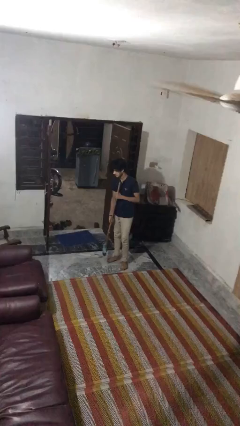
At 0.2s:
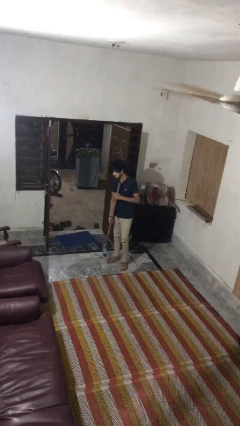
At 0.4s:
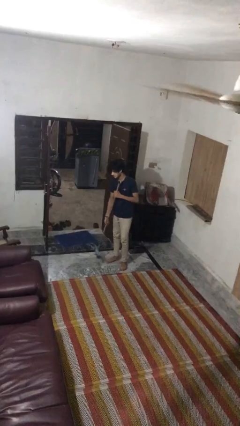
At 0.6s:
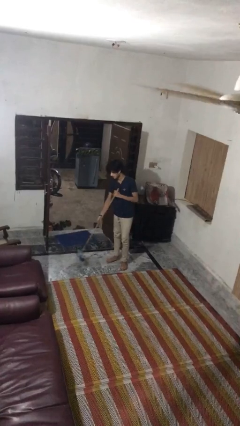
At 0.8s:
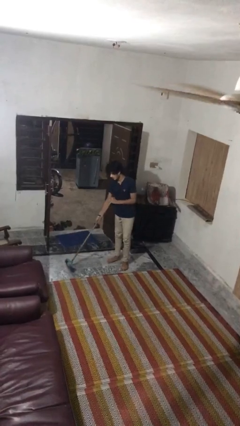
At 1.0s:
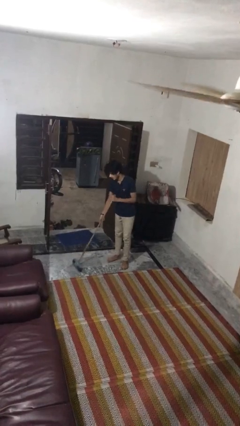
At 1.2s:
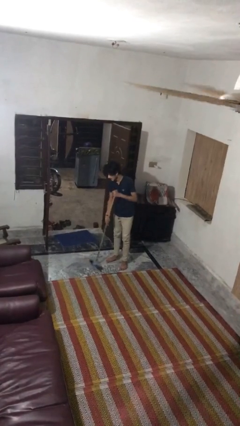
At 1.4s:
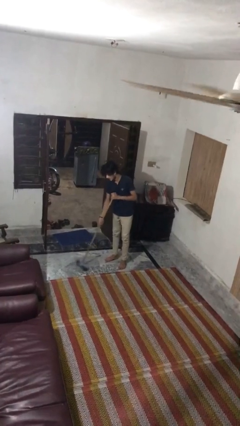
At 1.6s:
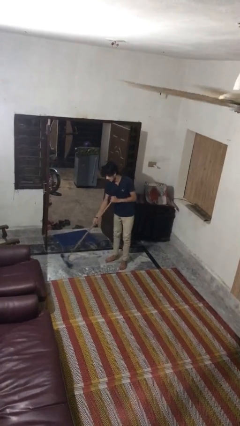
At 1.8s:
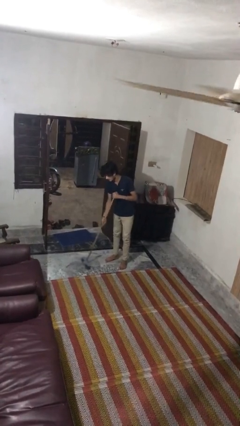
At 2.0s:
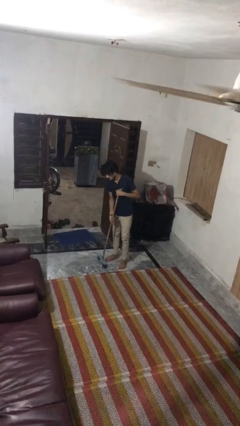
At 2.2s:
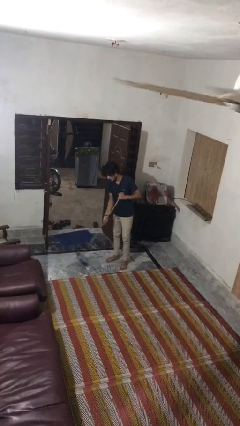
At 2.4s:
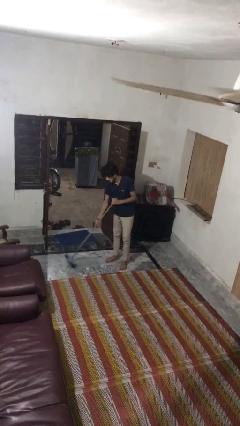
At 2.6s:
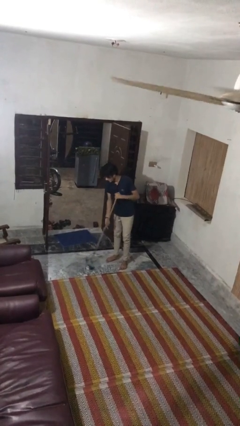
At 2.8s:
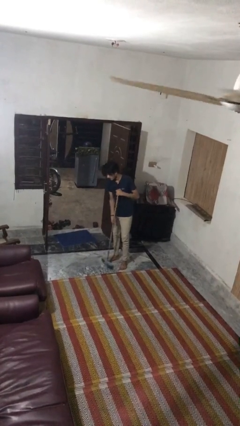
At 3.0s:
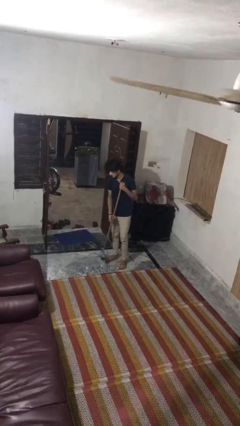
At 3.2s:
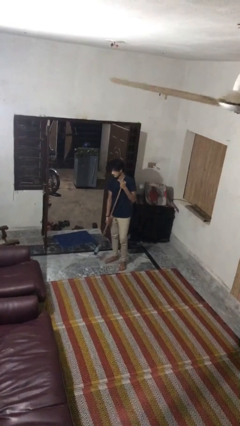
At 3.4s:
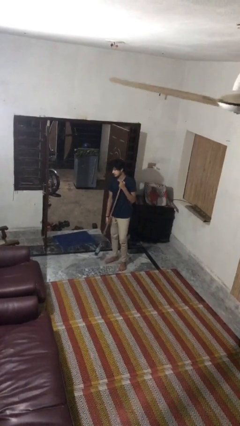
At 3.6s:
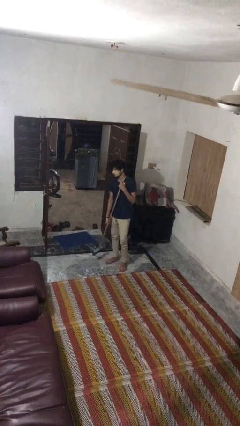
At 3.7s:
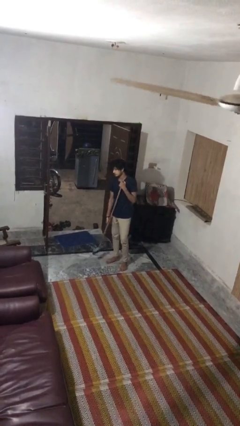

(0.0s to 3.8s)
person sweeps floor

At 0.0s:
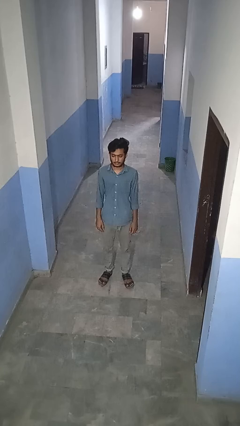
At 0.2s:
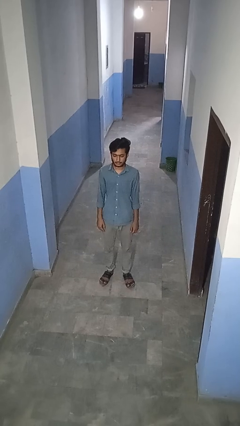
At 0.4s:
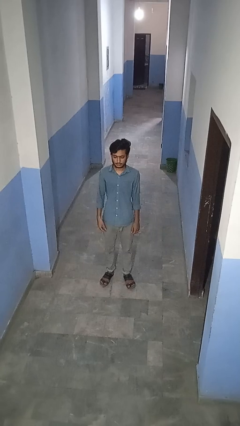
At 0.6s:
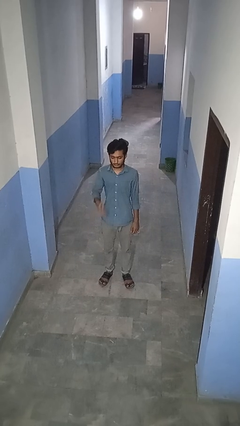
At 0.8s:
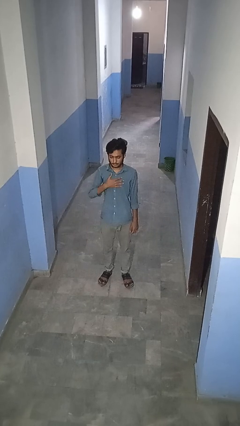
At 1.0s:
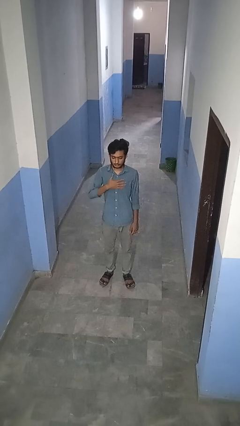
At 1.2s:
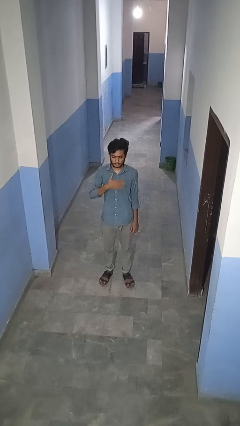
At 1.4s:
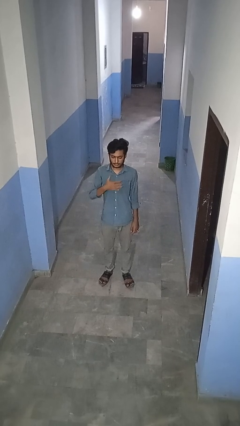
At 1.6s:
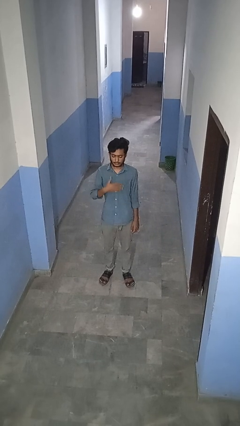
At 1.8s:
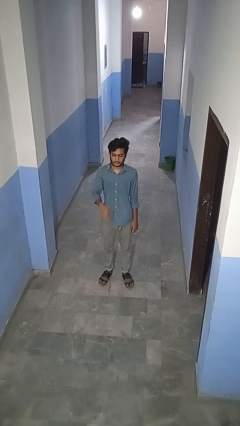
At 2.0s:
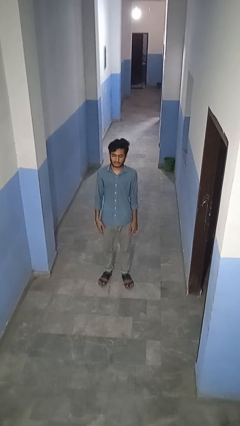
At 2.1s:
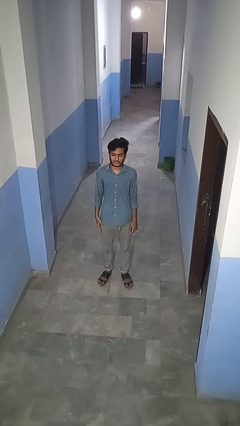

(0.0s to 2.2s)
person drums on chest

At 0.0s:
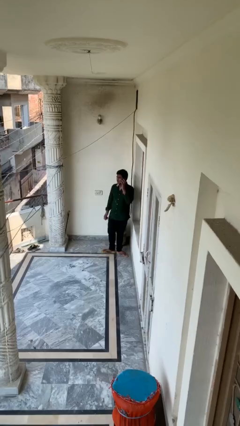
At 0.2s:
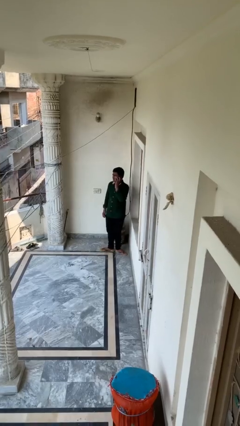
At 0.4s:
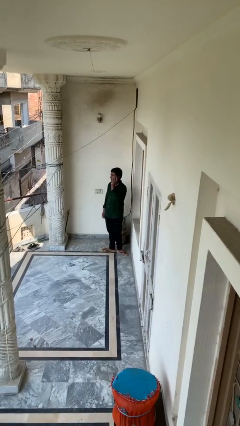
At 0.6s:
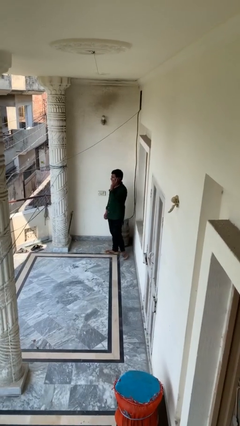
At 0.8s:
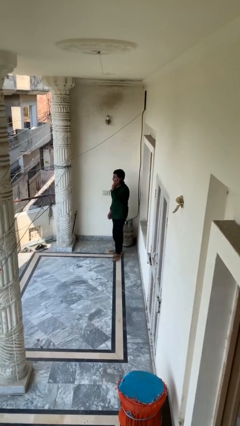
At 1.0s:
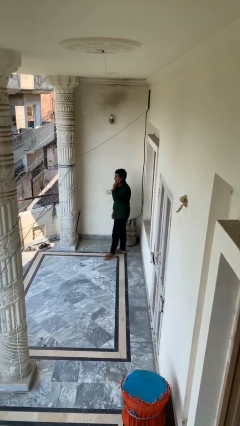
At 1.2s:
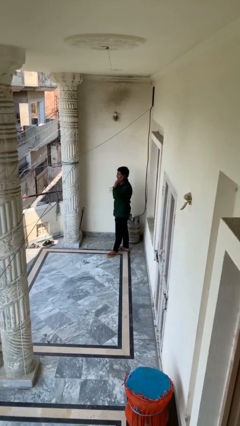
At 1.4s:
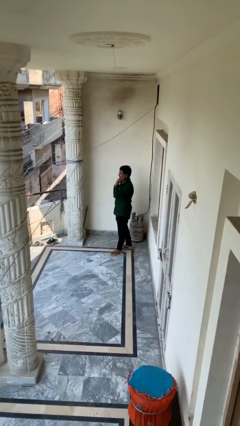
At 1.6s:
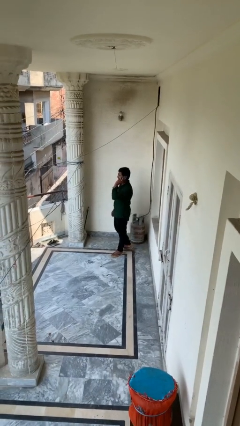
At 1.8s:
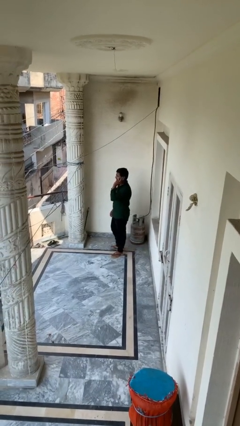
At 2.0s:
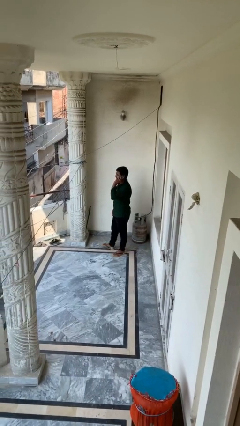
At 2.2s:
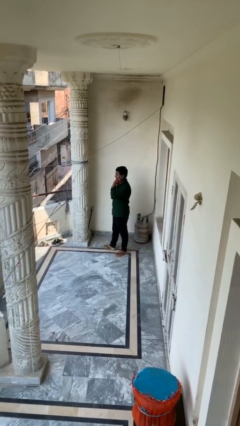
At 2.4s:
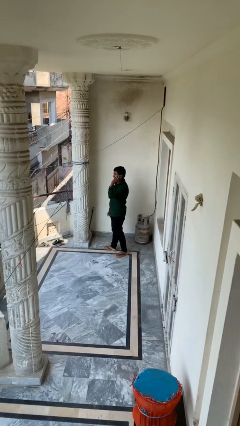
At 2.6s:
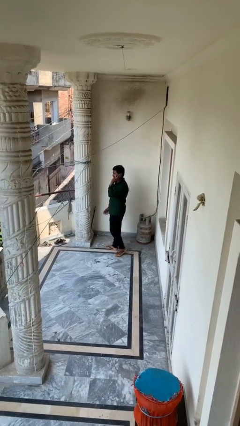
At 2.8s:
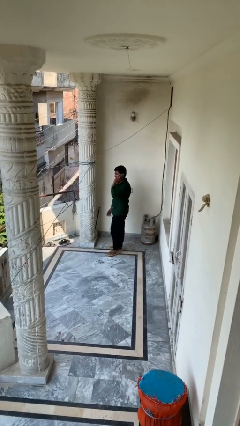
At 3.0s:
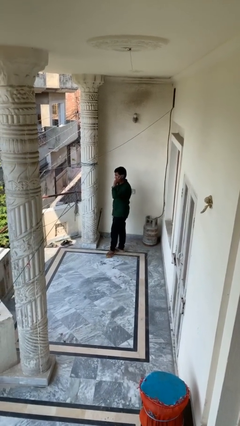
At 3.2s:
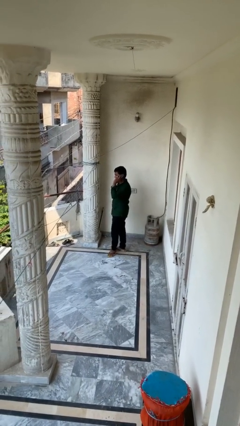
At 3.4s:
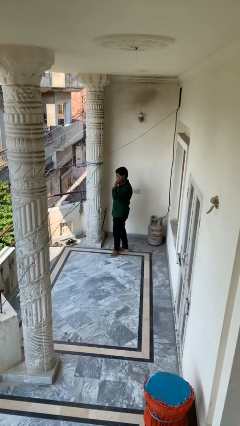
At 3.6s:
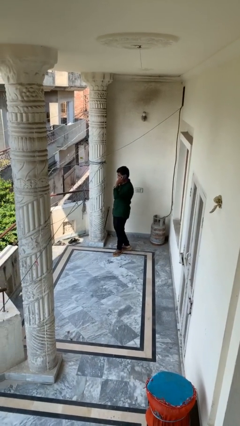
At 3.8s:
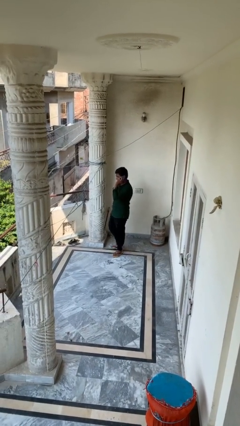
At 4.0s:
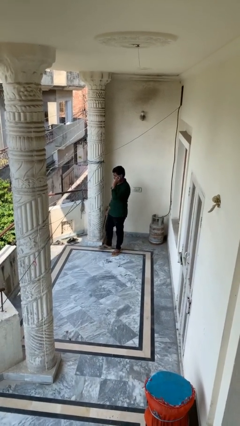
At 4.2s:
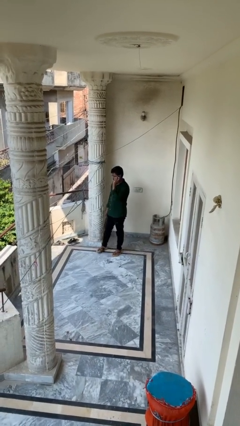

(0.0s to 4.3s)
person talks on phone

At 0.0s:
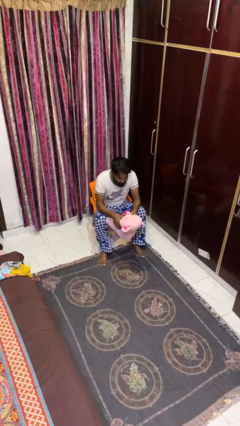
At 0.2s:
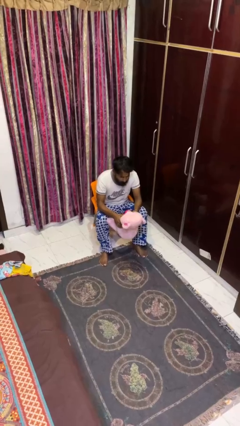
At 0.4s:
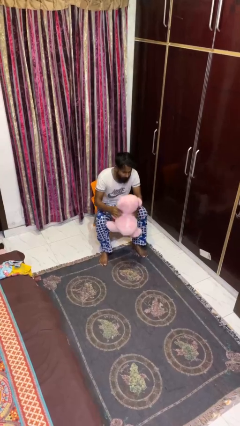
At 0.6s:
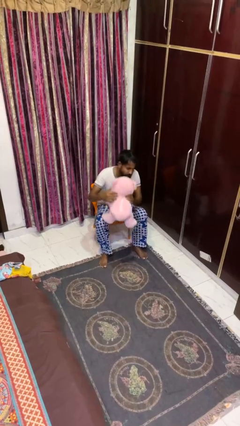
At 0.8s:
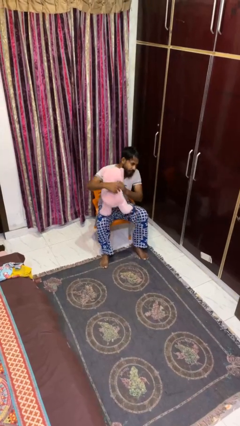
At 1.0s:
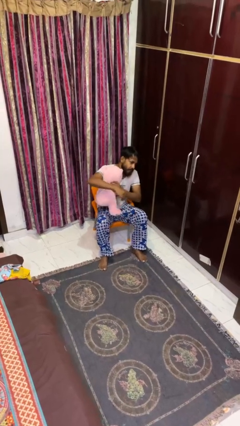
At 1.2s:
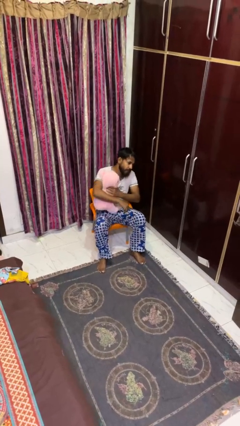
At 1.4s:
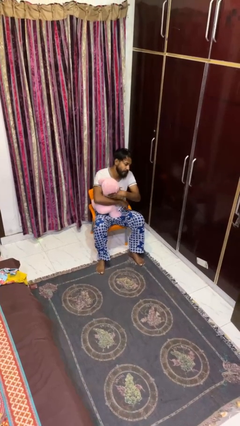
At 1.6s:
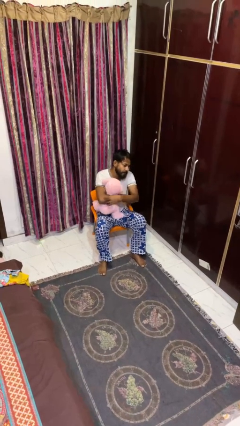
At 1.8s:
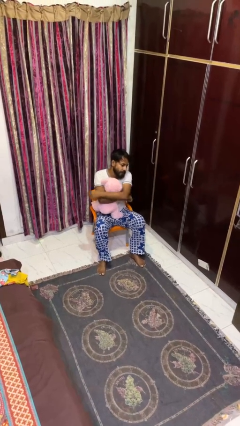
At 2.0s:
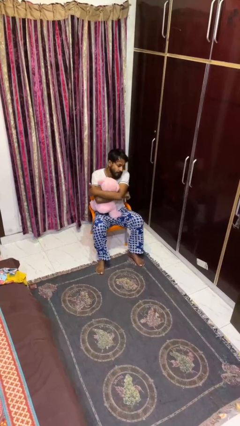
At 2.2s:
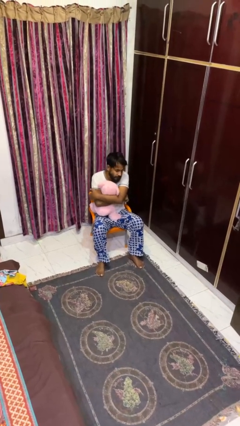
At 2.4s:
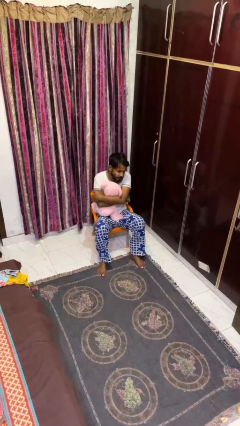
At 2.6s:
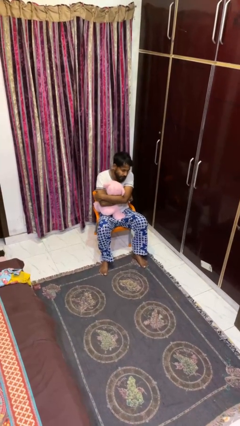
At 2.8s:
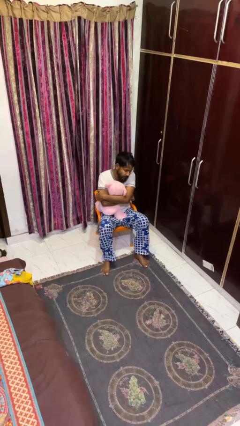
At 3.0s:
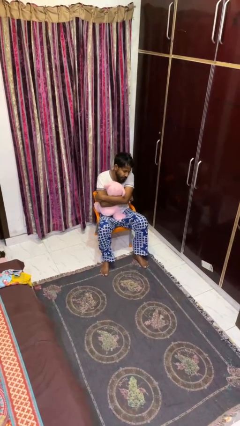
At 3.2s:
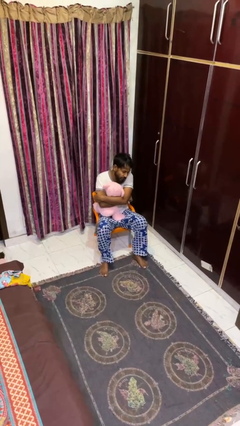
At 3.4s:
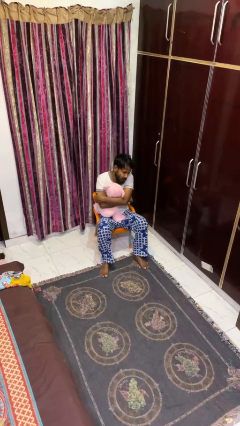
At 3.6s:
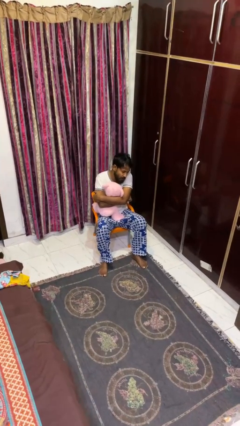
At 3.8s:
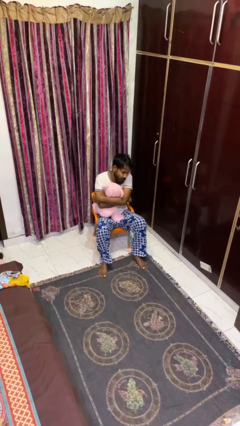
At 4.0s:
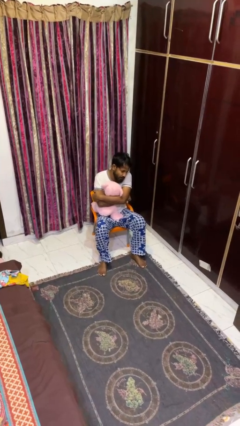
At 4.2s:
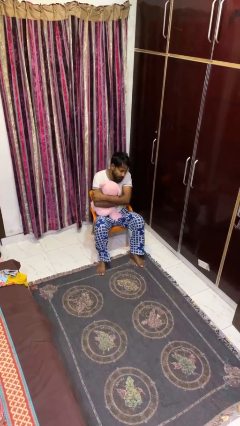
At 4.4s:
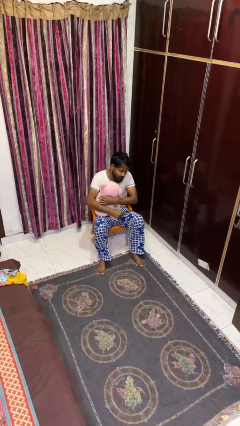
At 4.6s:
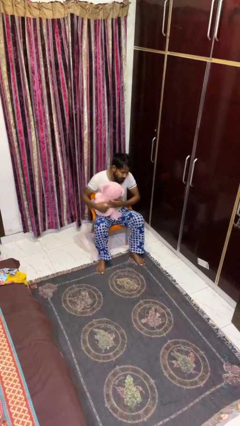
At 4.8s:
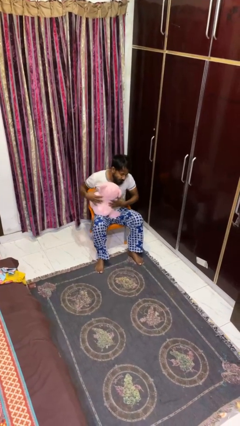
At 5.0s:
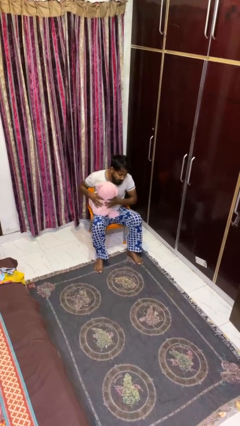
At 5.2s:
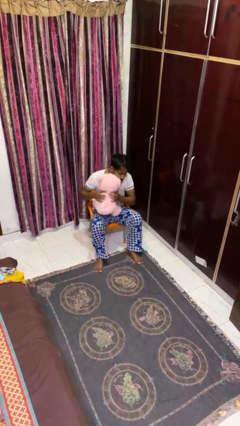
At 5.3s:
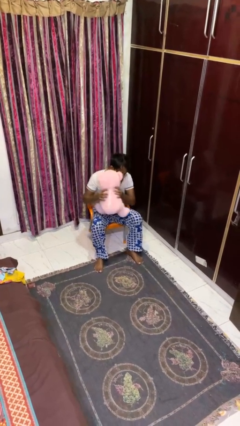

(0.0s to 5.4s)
person hugs stuffed animal

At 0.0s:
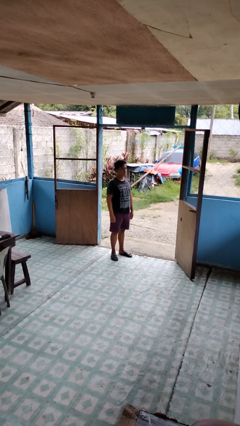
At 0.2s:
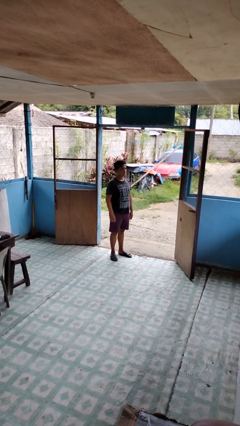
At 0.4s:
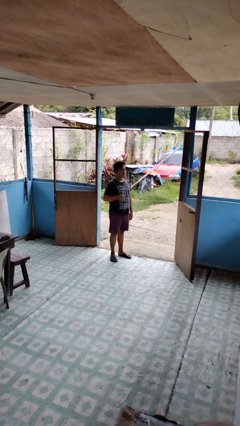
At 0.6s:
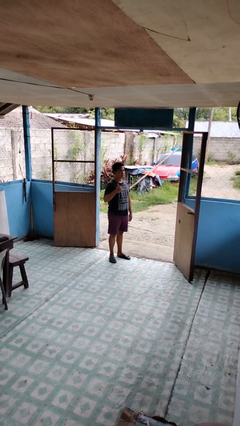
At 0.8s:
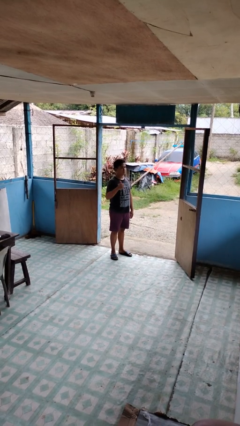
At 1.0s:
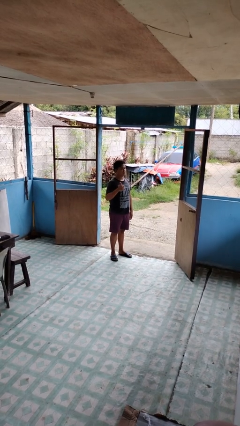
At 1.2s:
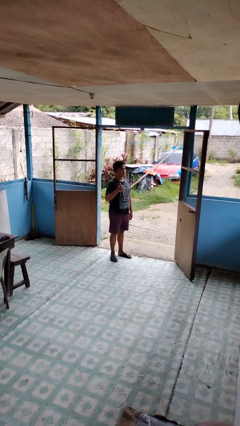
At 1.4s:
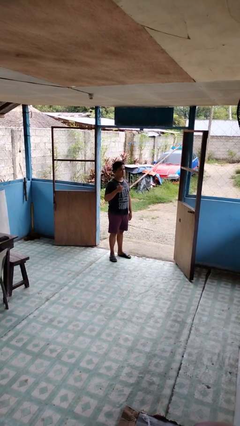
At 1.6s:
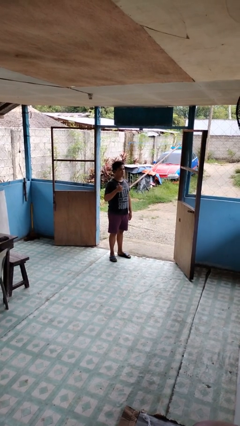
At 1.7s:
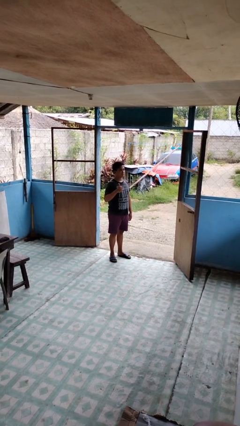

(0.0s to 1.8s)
person gestures thumbs up
